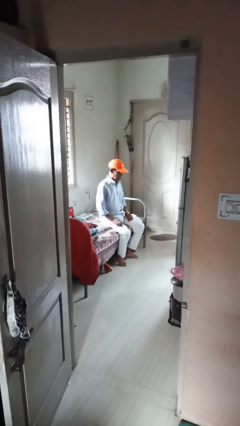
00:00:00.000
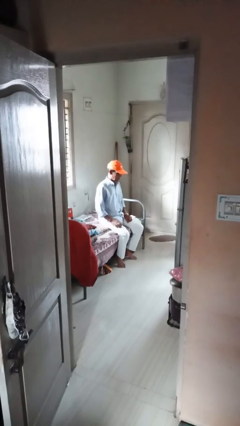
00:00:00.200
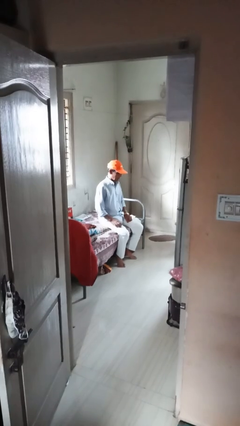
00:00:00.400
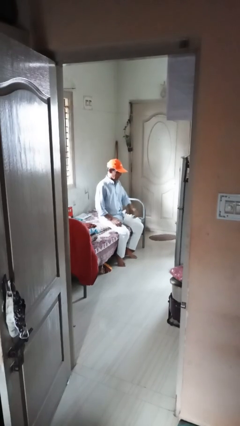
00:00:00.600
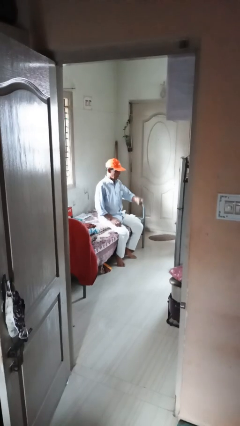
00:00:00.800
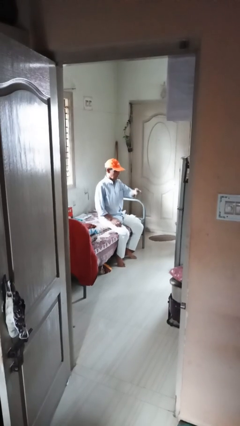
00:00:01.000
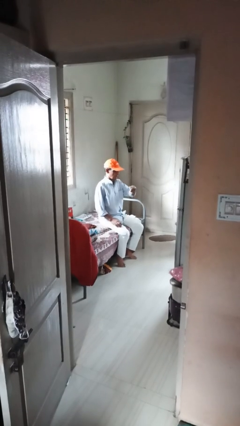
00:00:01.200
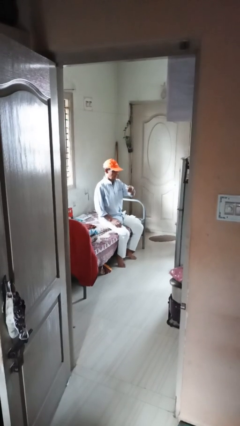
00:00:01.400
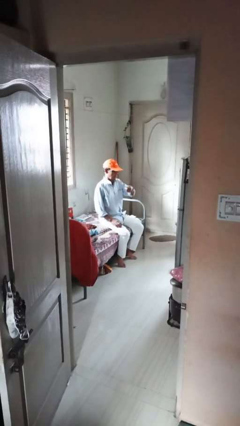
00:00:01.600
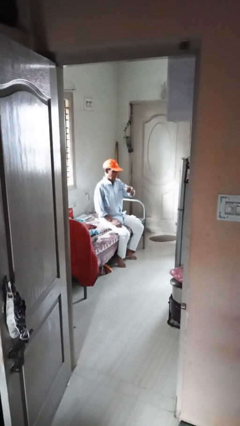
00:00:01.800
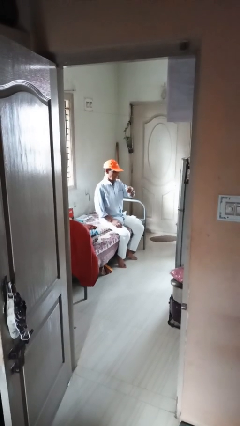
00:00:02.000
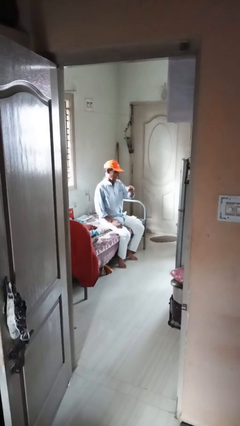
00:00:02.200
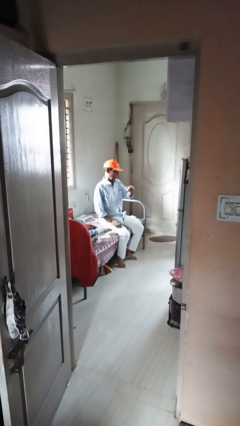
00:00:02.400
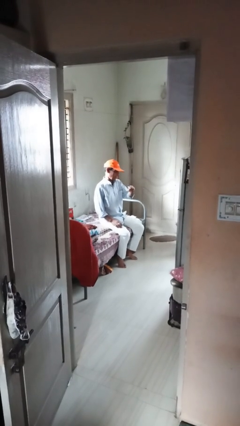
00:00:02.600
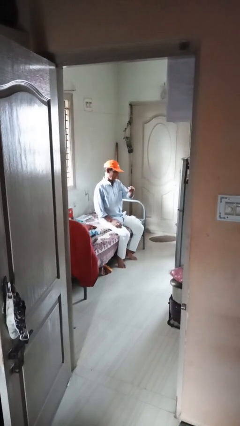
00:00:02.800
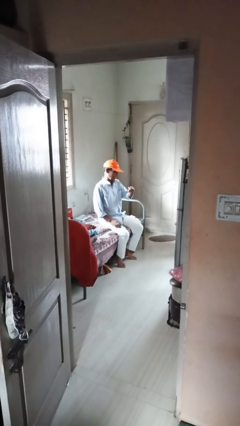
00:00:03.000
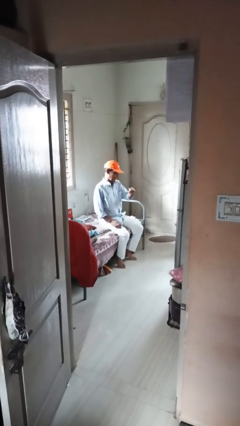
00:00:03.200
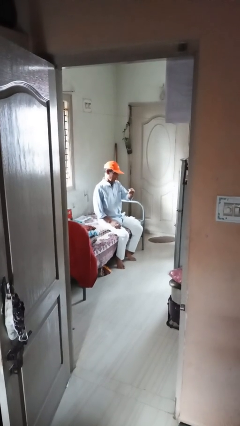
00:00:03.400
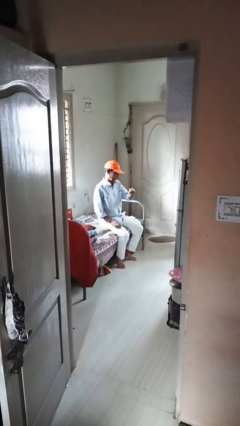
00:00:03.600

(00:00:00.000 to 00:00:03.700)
person looks at wristwatch

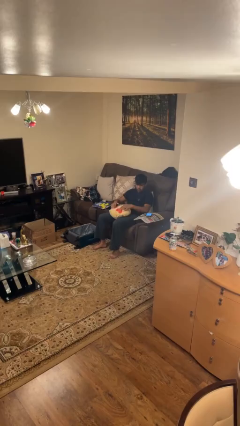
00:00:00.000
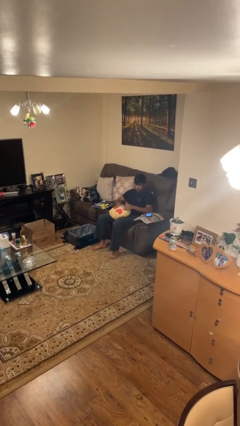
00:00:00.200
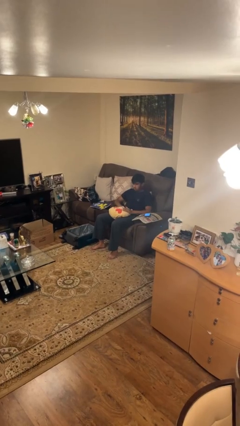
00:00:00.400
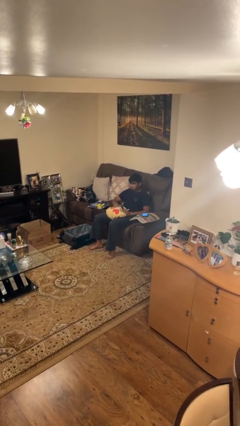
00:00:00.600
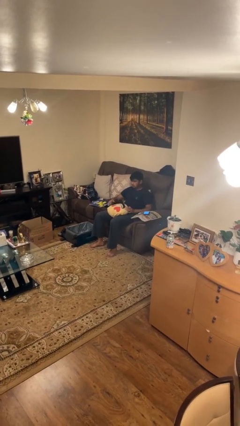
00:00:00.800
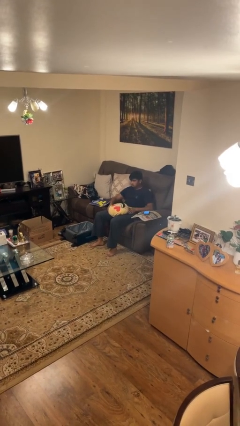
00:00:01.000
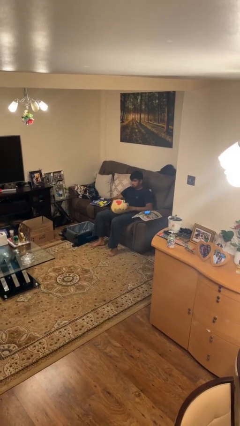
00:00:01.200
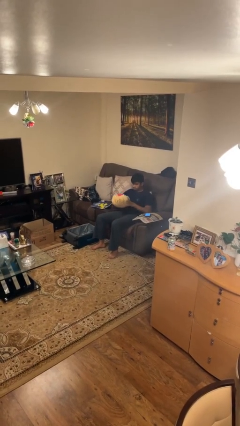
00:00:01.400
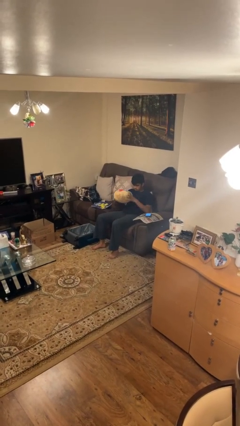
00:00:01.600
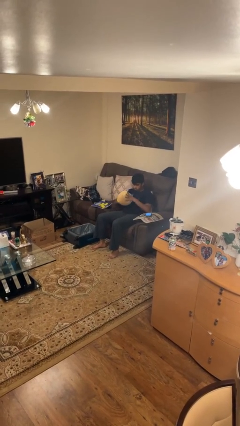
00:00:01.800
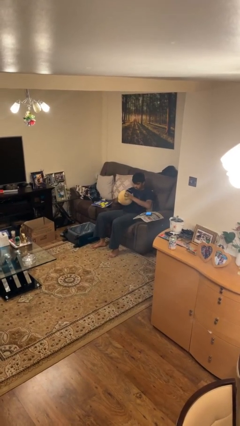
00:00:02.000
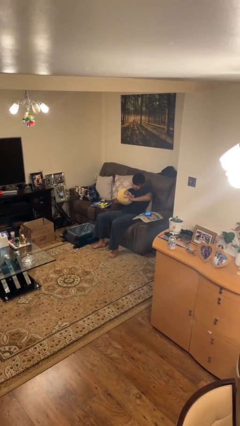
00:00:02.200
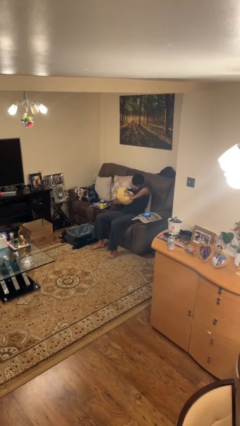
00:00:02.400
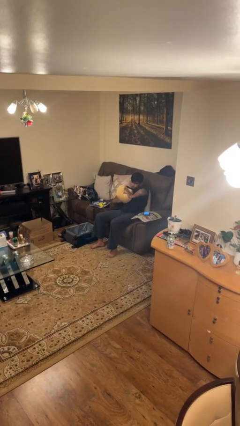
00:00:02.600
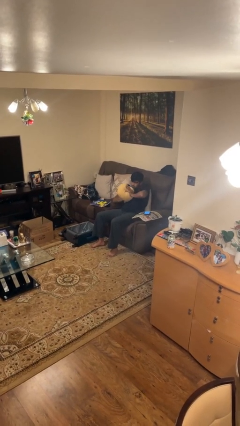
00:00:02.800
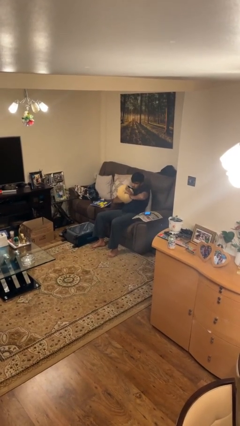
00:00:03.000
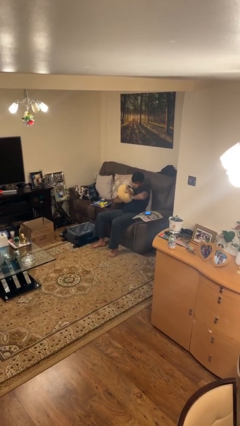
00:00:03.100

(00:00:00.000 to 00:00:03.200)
person squeezes object

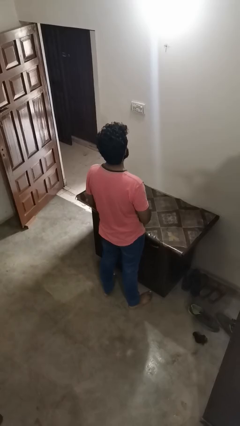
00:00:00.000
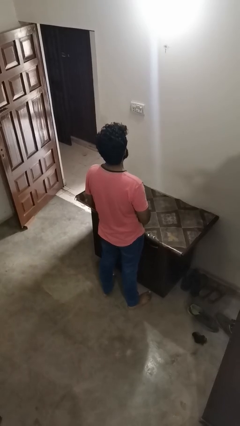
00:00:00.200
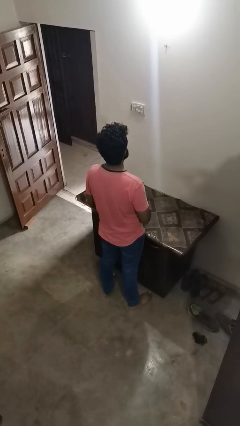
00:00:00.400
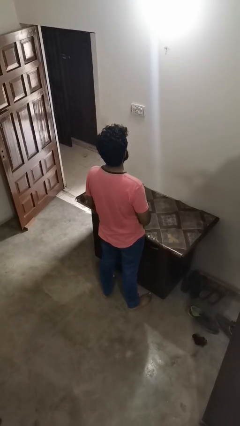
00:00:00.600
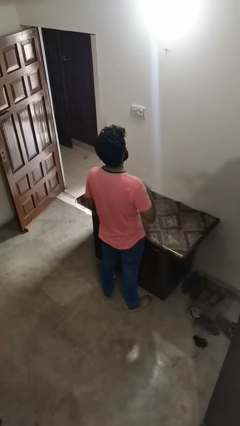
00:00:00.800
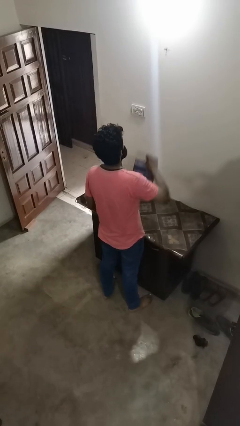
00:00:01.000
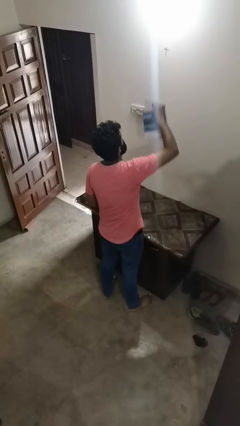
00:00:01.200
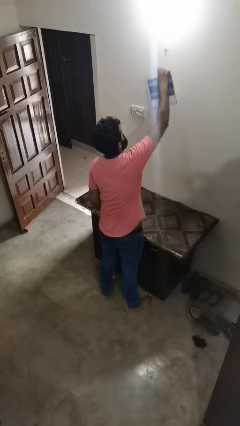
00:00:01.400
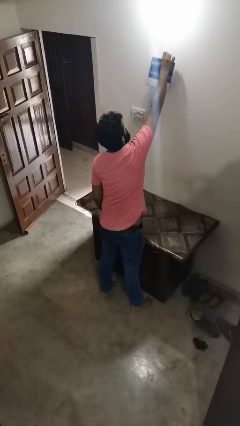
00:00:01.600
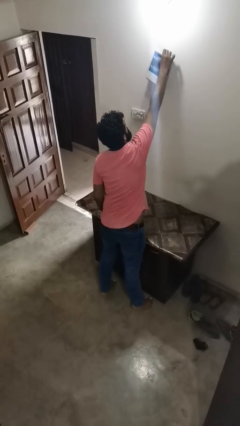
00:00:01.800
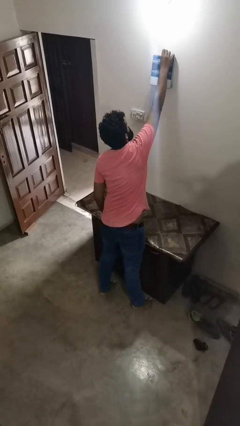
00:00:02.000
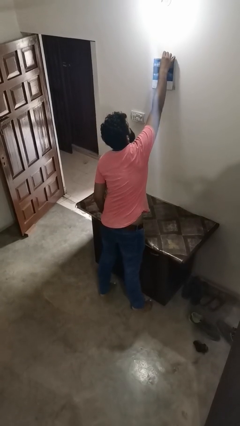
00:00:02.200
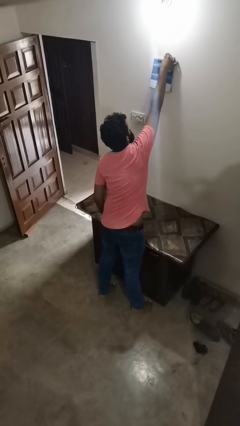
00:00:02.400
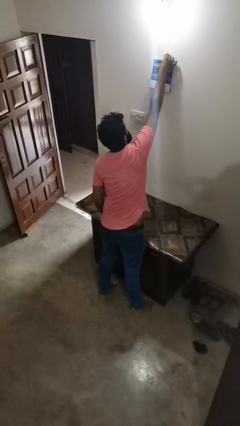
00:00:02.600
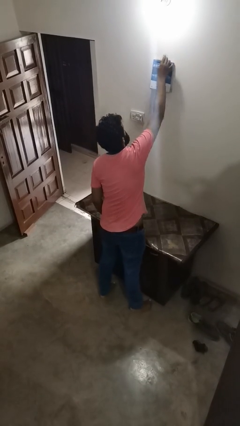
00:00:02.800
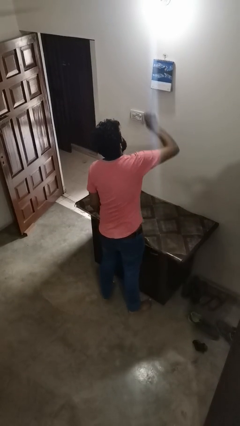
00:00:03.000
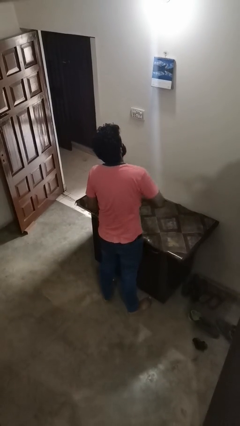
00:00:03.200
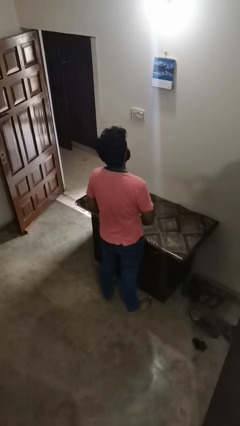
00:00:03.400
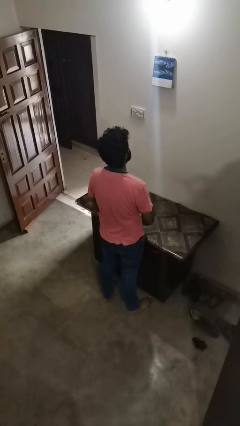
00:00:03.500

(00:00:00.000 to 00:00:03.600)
person puts up picture frame

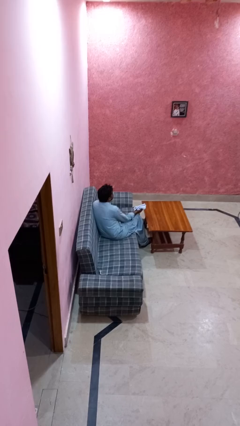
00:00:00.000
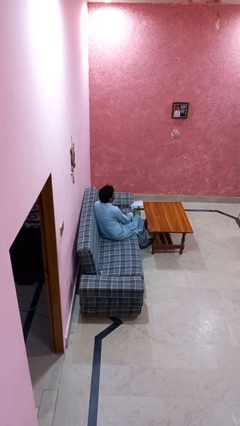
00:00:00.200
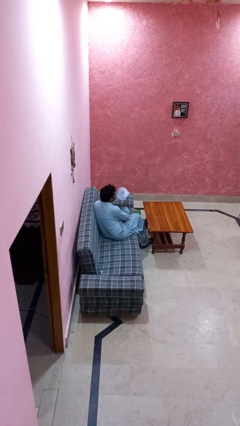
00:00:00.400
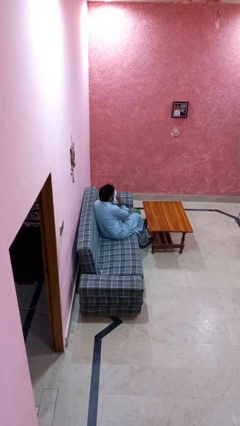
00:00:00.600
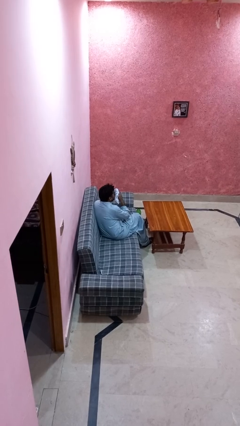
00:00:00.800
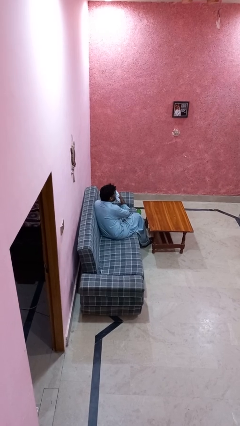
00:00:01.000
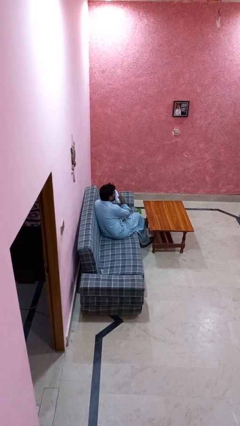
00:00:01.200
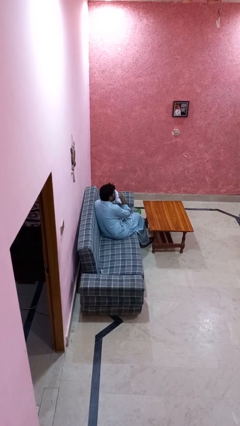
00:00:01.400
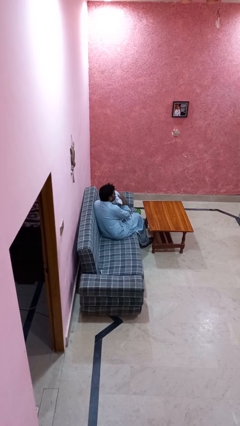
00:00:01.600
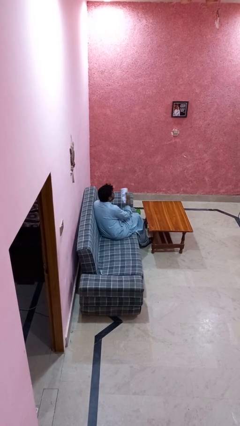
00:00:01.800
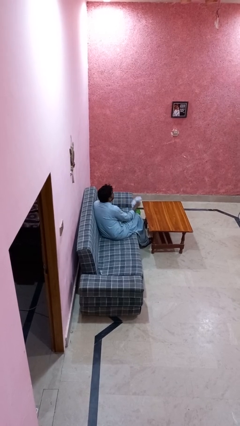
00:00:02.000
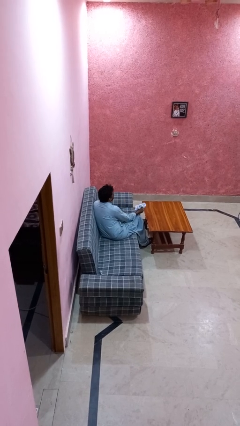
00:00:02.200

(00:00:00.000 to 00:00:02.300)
person blows nose

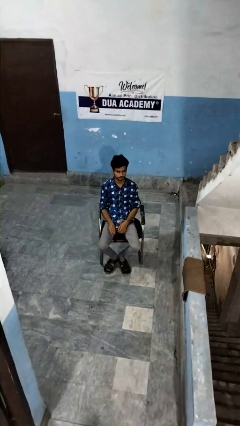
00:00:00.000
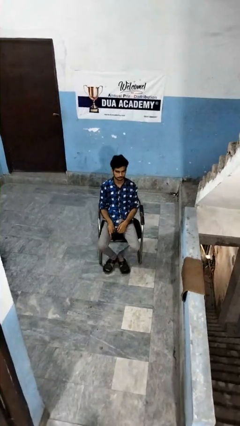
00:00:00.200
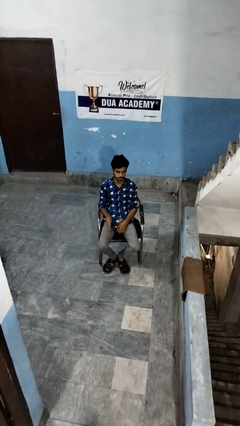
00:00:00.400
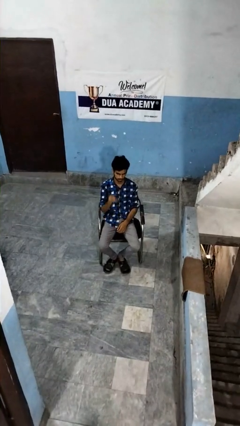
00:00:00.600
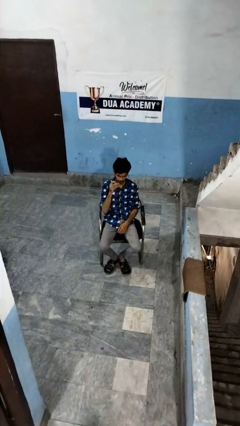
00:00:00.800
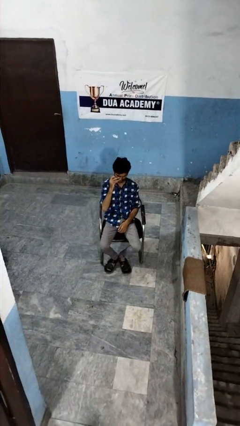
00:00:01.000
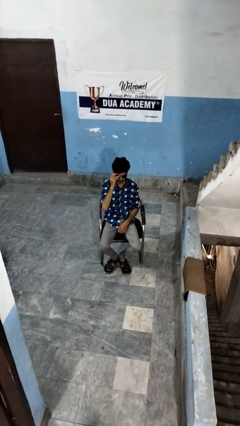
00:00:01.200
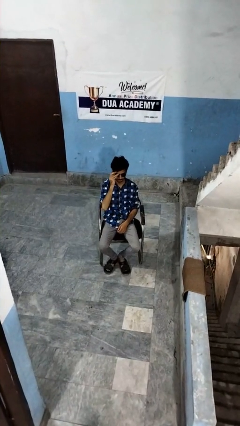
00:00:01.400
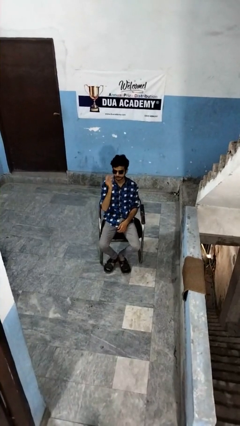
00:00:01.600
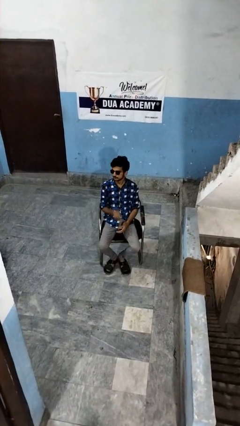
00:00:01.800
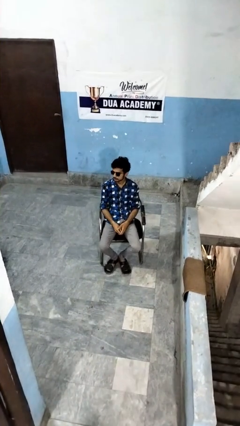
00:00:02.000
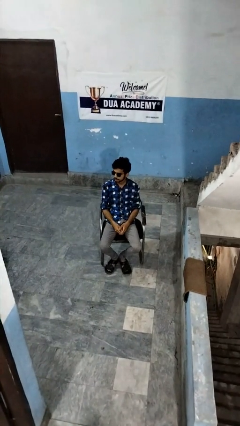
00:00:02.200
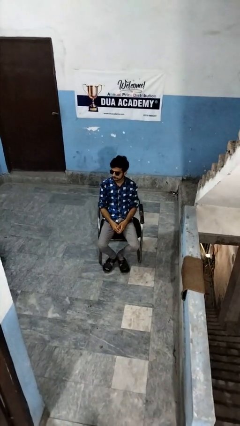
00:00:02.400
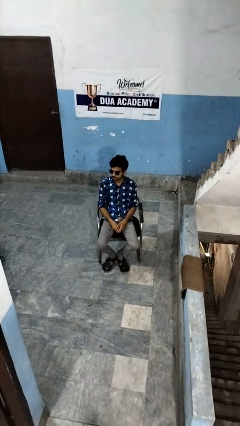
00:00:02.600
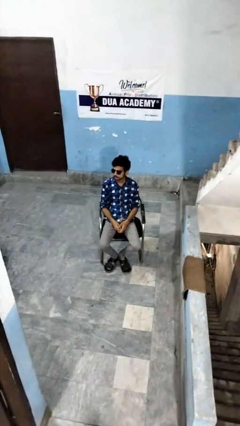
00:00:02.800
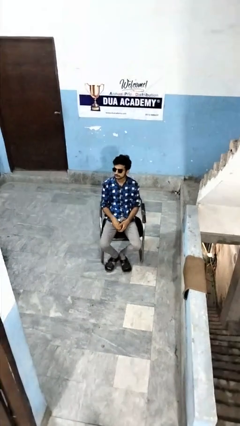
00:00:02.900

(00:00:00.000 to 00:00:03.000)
person puts on sunglasses

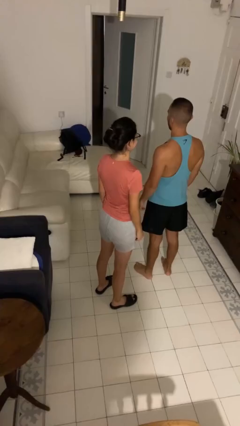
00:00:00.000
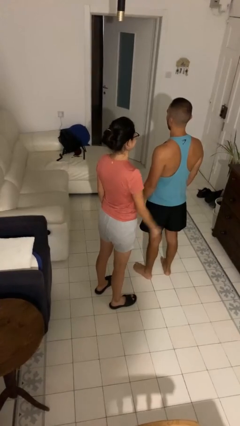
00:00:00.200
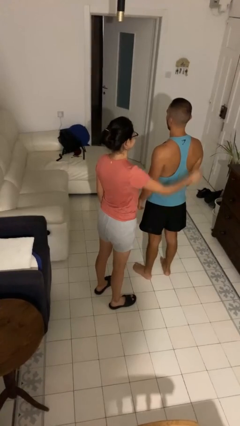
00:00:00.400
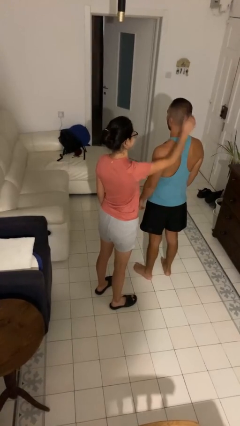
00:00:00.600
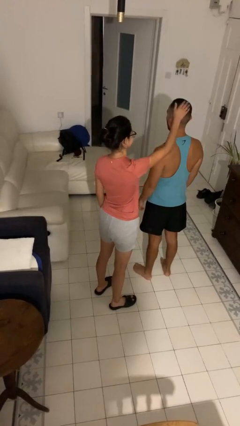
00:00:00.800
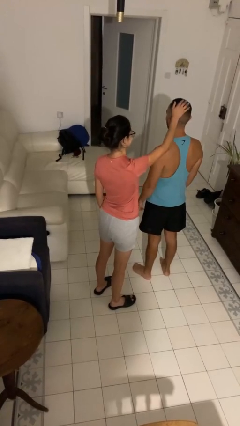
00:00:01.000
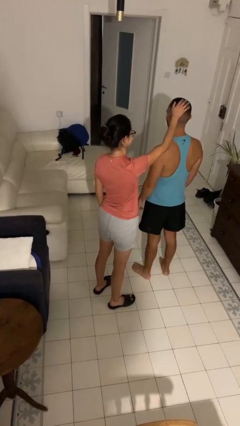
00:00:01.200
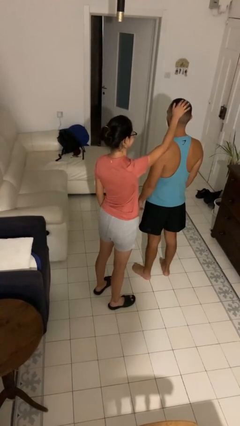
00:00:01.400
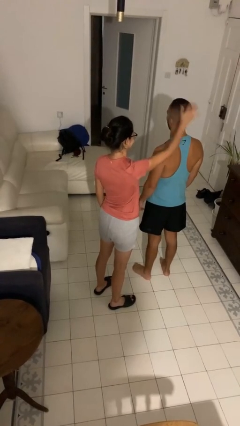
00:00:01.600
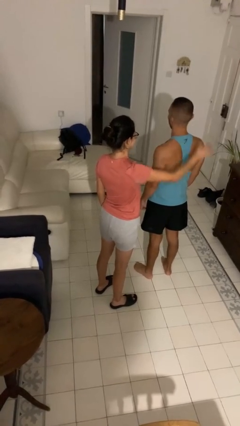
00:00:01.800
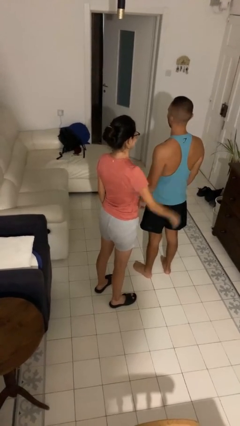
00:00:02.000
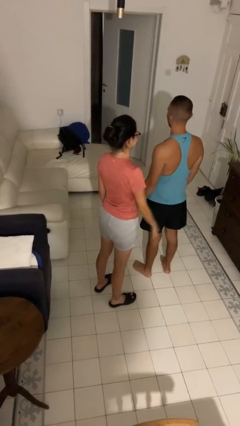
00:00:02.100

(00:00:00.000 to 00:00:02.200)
person grabs person by hair
